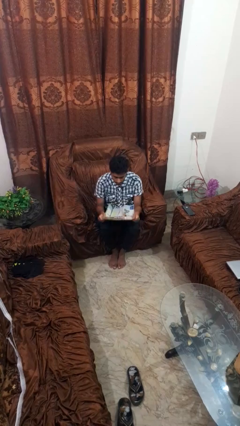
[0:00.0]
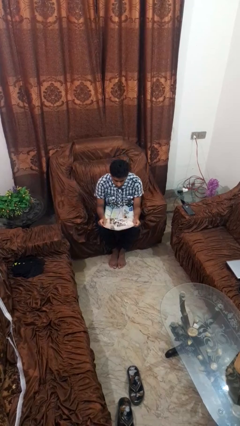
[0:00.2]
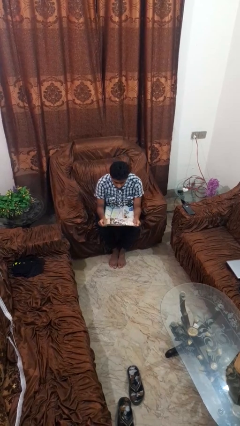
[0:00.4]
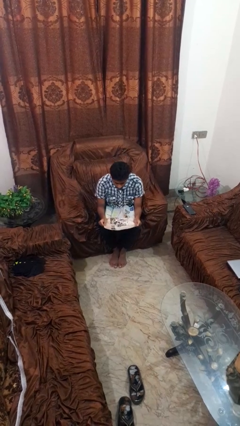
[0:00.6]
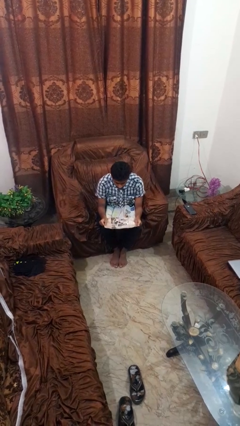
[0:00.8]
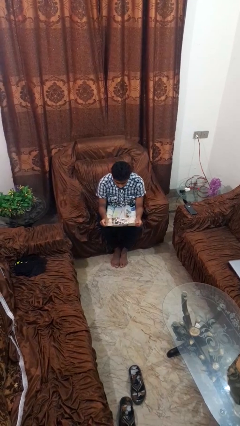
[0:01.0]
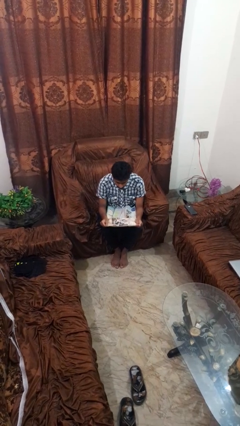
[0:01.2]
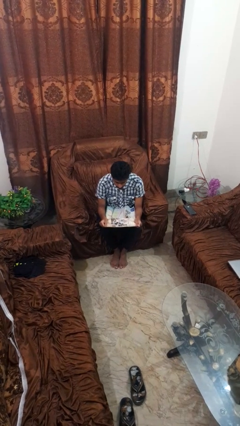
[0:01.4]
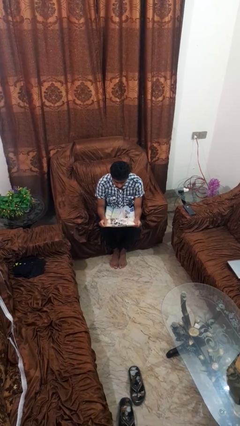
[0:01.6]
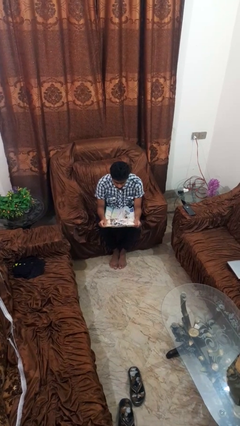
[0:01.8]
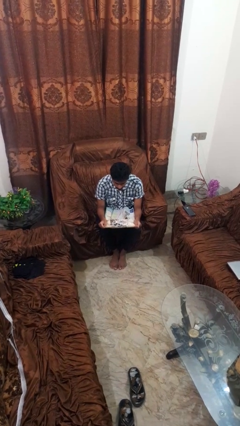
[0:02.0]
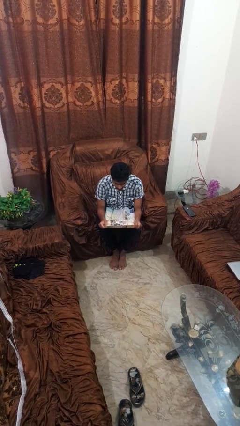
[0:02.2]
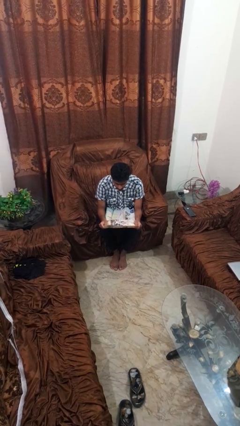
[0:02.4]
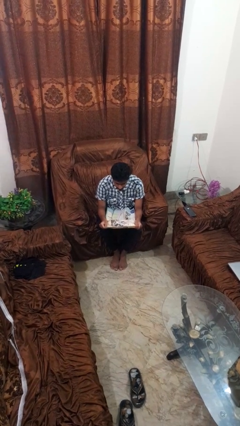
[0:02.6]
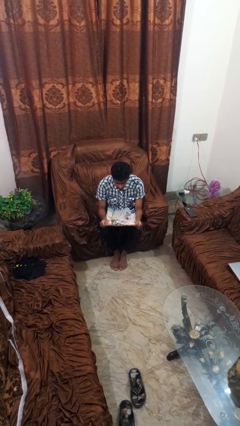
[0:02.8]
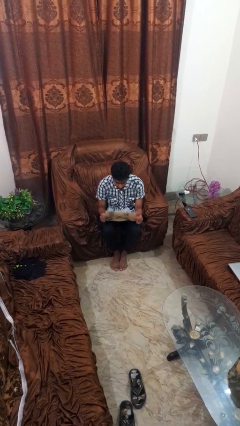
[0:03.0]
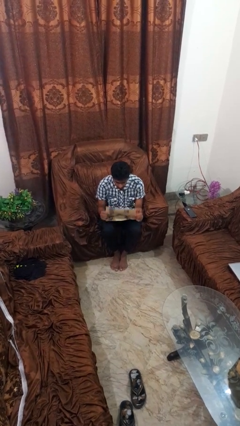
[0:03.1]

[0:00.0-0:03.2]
person reads newspaper

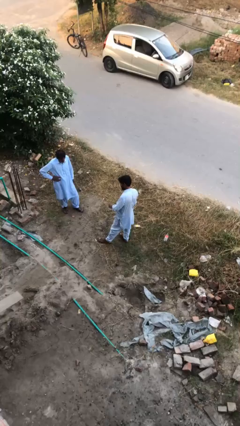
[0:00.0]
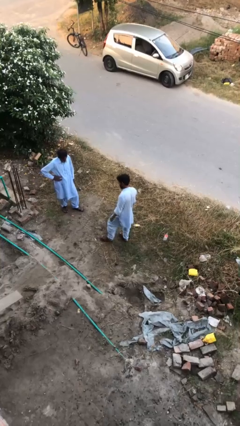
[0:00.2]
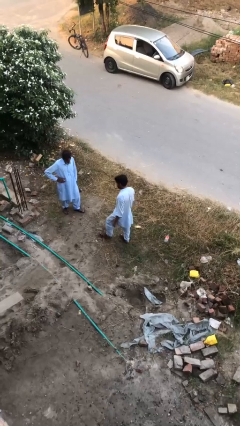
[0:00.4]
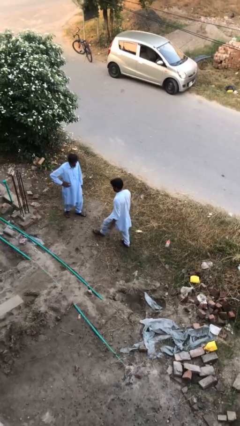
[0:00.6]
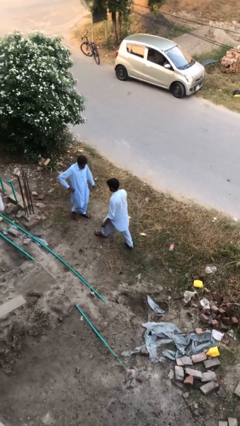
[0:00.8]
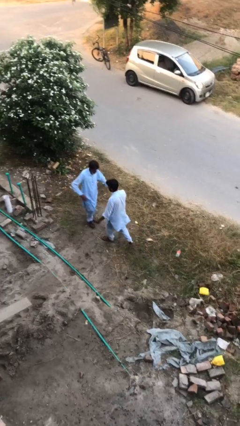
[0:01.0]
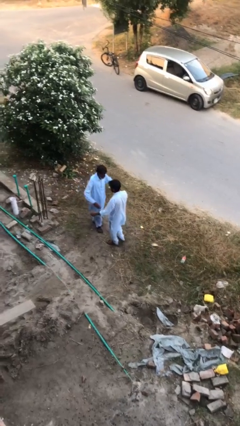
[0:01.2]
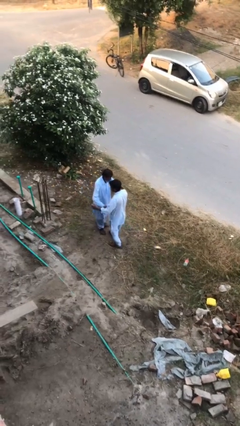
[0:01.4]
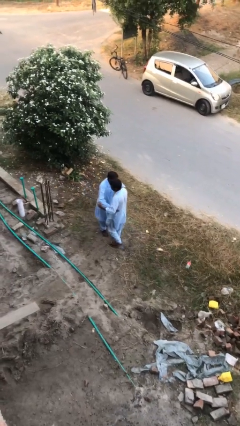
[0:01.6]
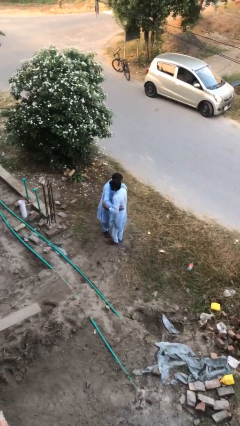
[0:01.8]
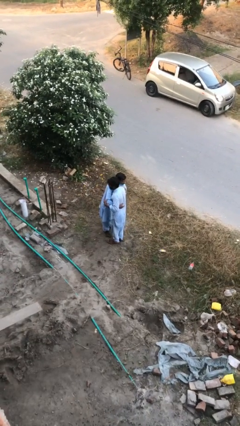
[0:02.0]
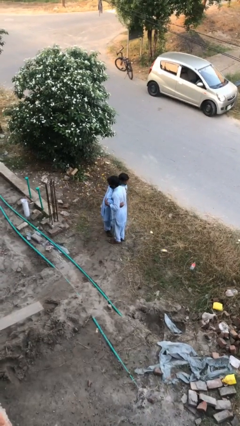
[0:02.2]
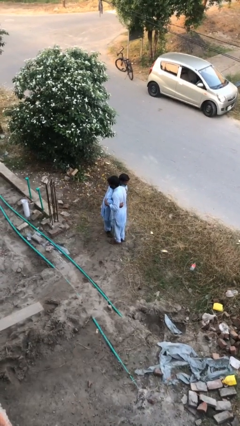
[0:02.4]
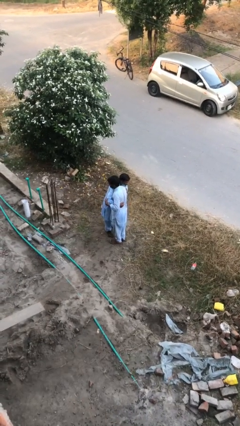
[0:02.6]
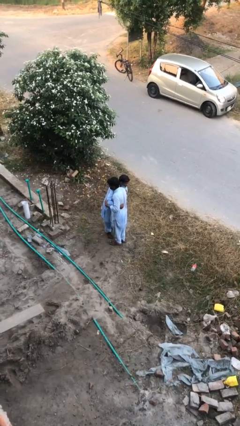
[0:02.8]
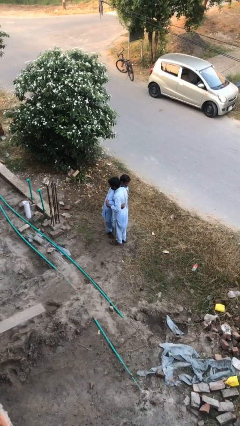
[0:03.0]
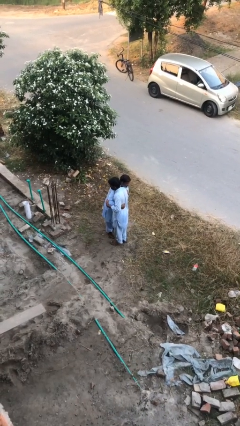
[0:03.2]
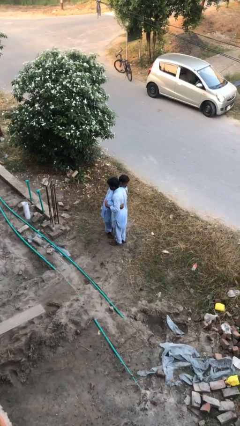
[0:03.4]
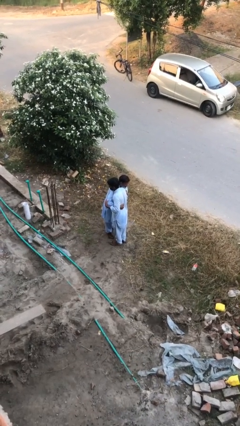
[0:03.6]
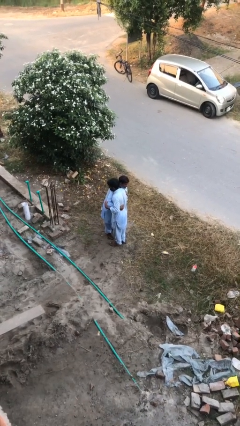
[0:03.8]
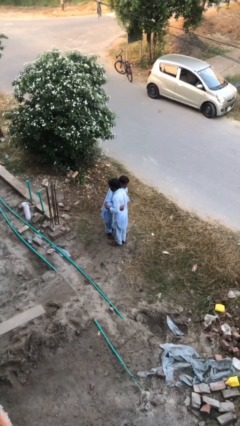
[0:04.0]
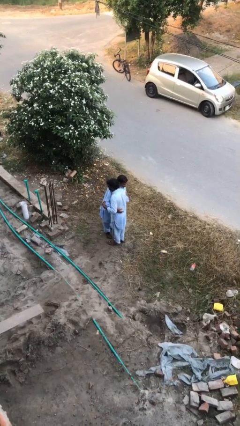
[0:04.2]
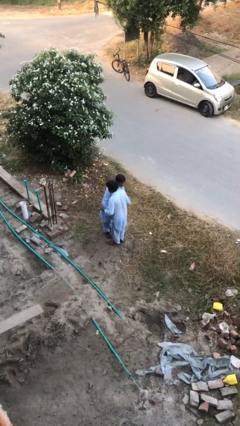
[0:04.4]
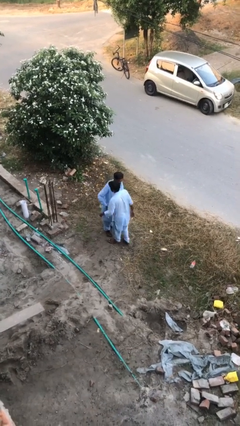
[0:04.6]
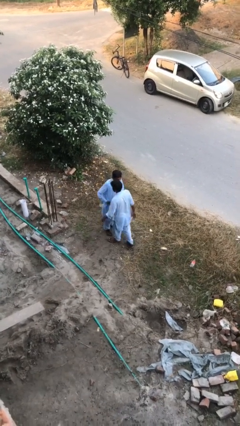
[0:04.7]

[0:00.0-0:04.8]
person embraces person

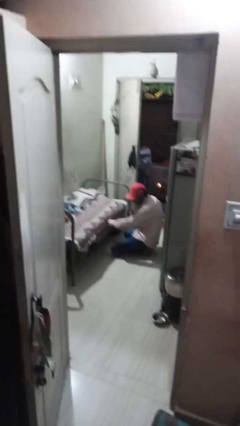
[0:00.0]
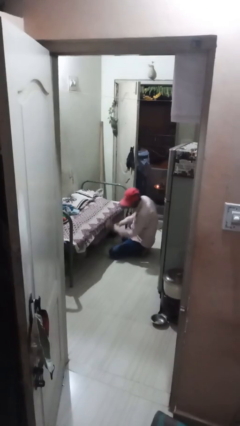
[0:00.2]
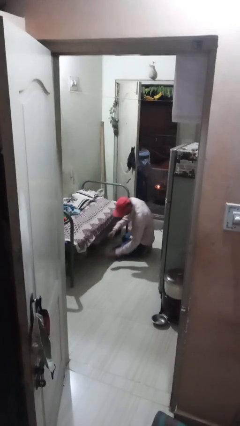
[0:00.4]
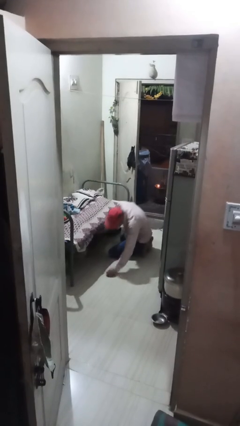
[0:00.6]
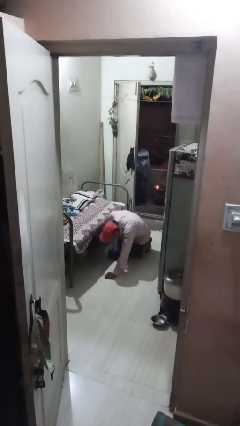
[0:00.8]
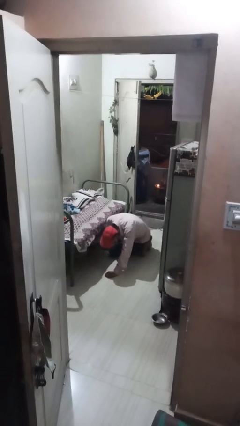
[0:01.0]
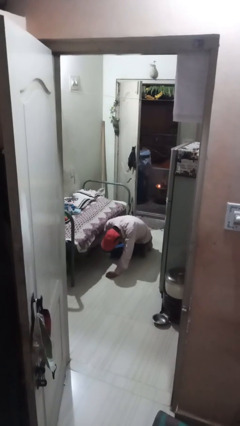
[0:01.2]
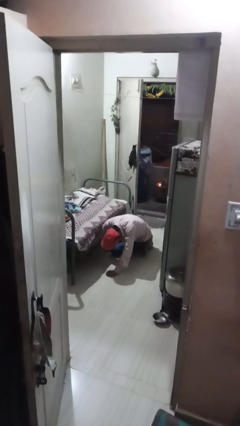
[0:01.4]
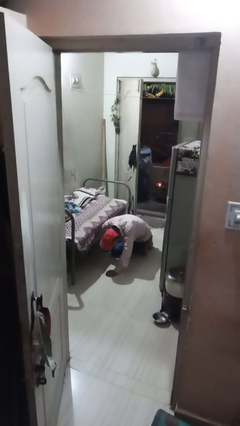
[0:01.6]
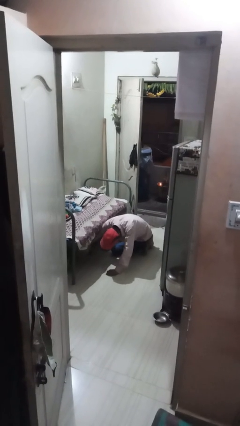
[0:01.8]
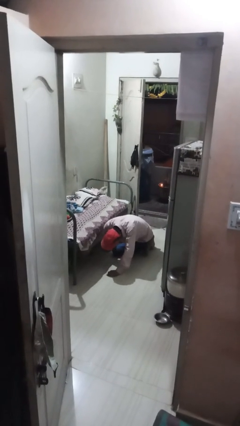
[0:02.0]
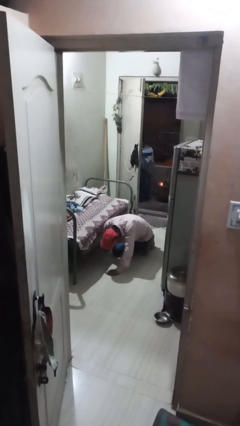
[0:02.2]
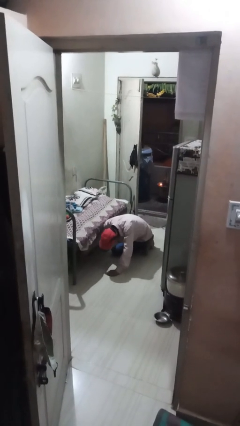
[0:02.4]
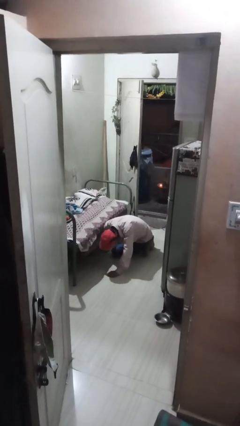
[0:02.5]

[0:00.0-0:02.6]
person searches under bed

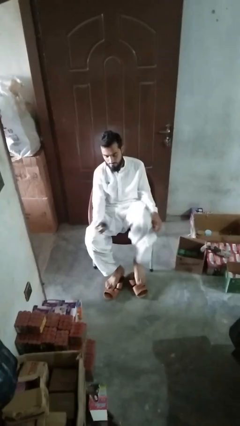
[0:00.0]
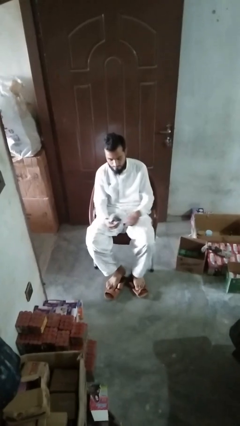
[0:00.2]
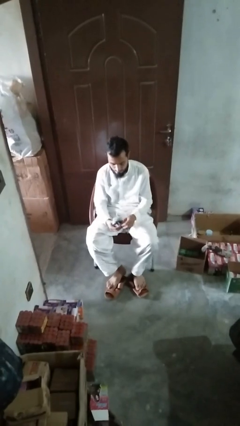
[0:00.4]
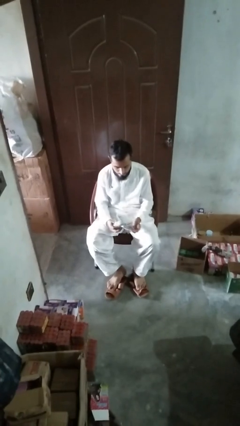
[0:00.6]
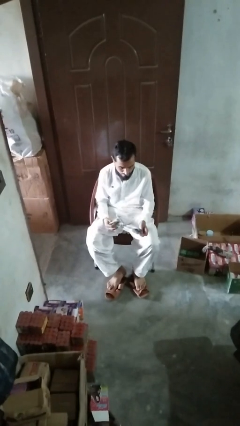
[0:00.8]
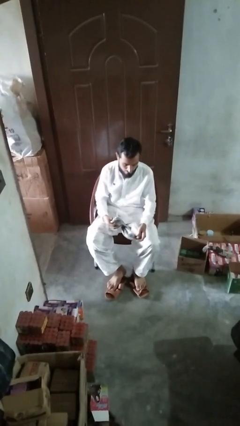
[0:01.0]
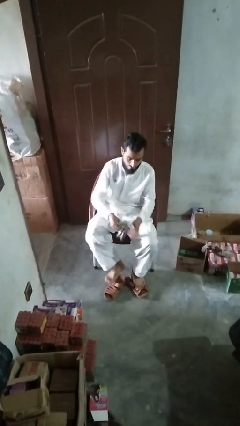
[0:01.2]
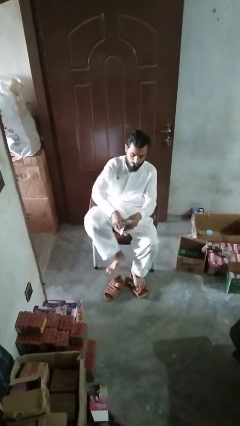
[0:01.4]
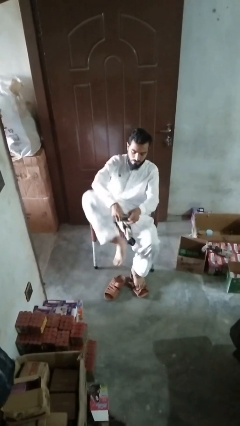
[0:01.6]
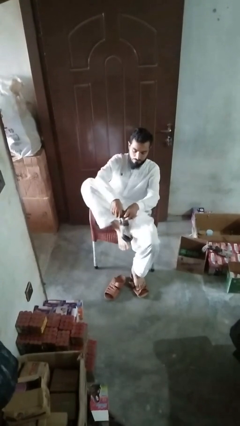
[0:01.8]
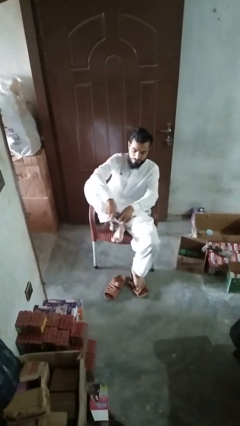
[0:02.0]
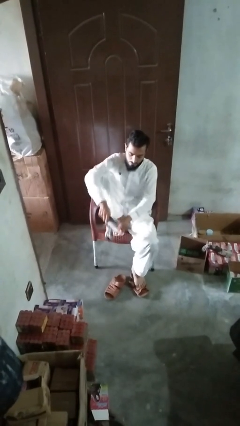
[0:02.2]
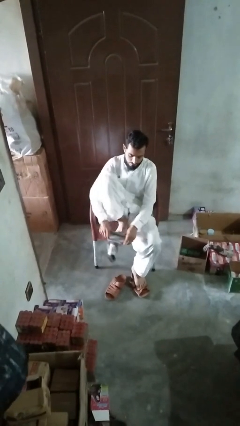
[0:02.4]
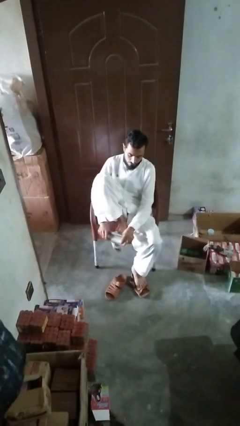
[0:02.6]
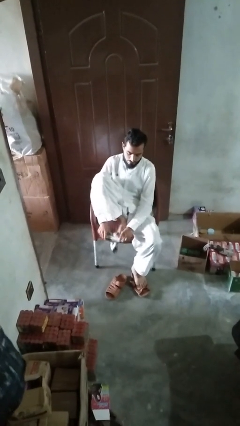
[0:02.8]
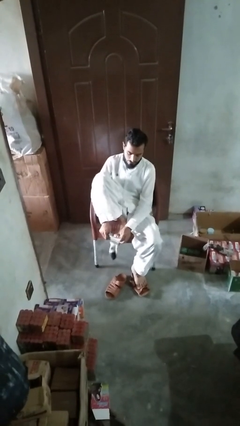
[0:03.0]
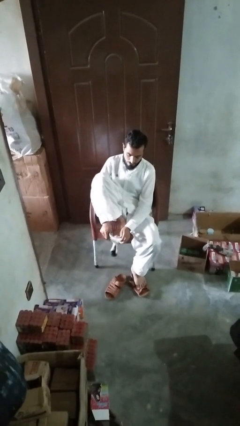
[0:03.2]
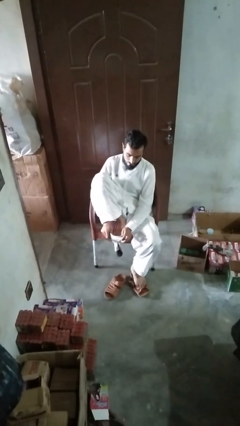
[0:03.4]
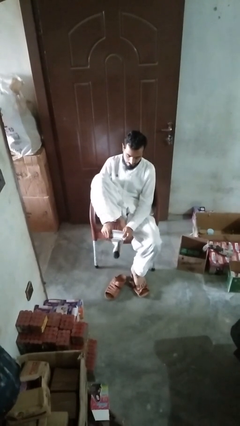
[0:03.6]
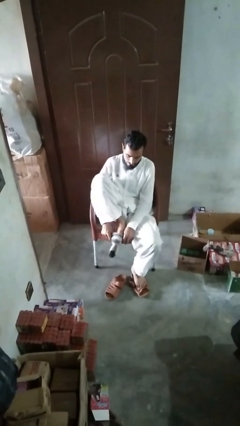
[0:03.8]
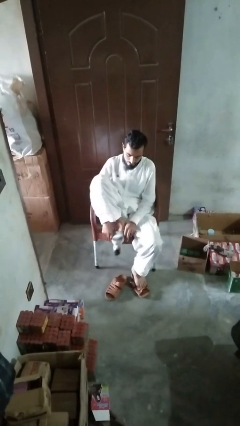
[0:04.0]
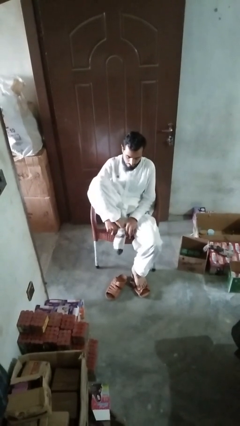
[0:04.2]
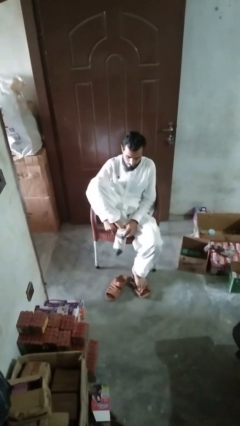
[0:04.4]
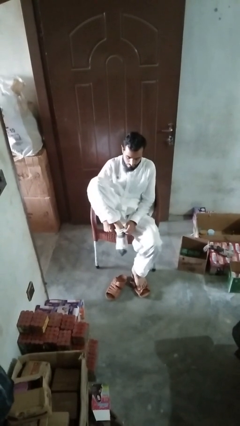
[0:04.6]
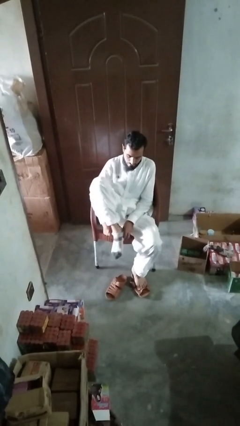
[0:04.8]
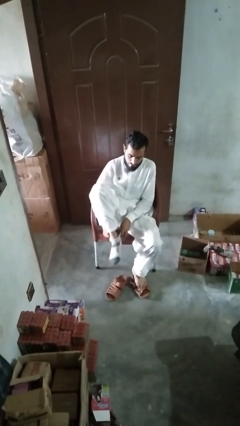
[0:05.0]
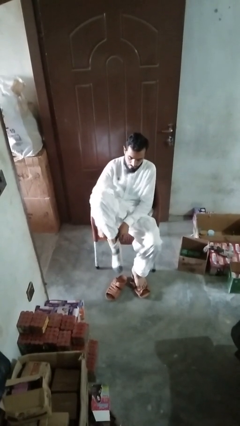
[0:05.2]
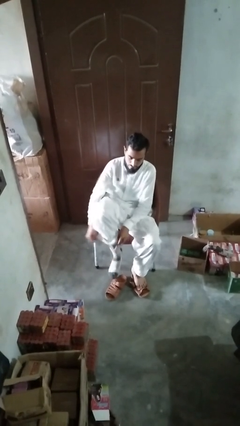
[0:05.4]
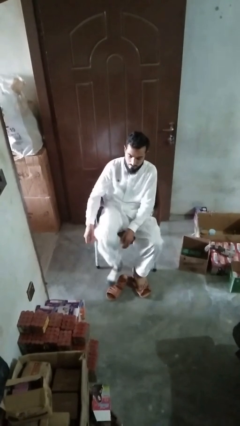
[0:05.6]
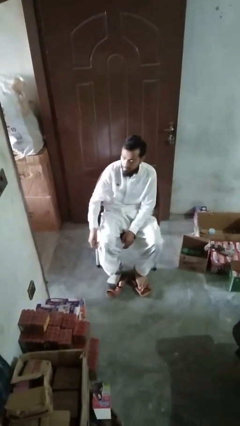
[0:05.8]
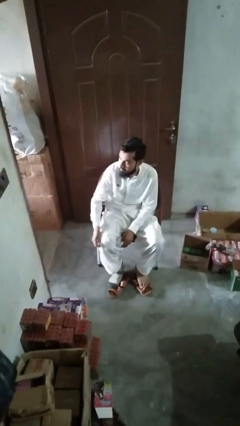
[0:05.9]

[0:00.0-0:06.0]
person puts on socks

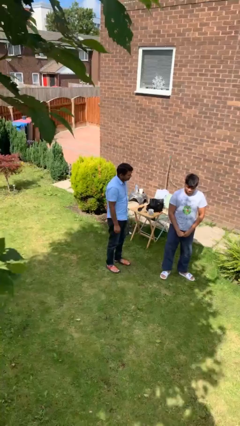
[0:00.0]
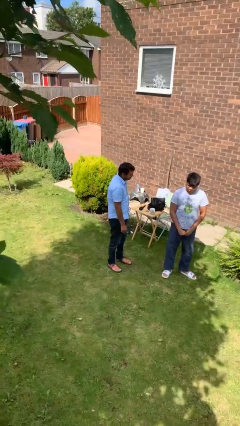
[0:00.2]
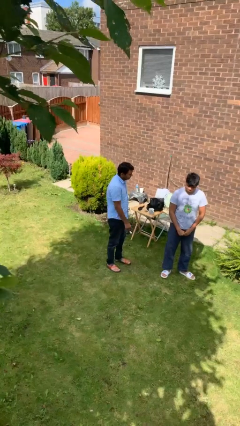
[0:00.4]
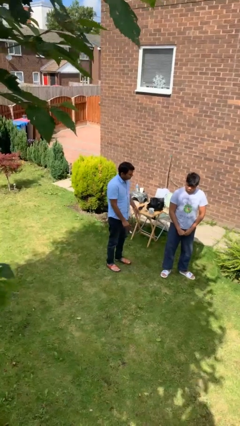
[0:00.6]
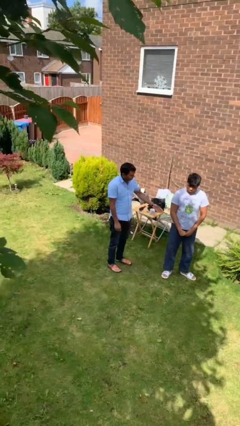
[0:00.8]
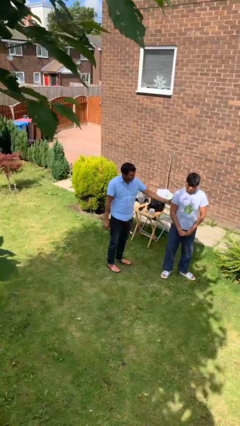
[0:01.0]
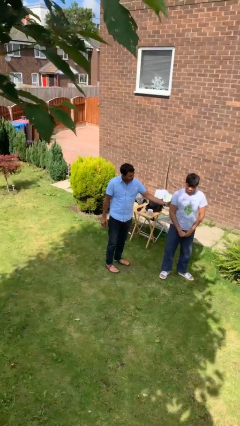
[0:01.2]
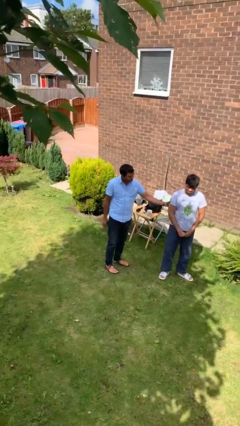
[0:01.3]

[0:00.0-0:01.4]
person grabs person by bicep
